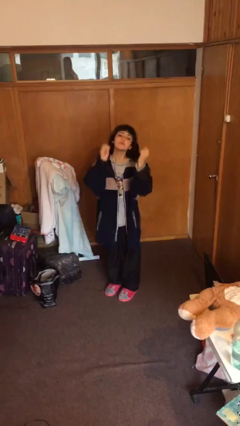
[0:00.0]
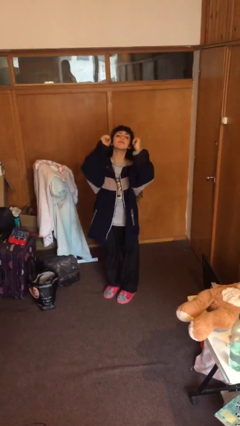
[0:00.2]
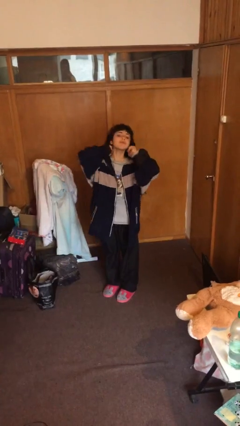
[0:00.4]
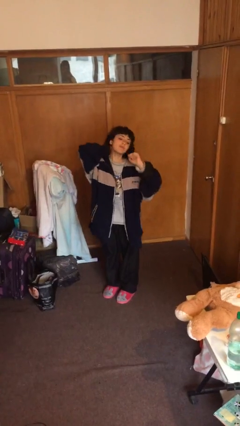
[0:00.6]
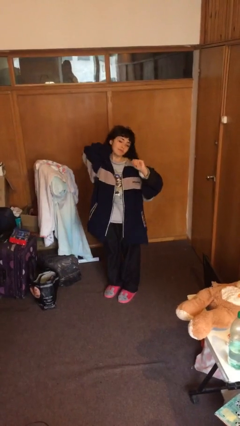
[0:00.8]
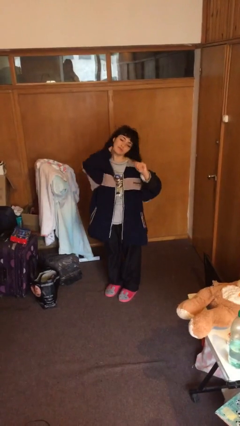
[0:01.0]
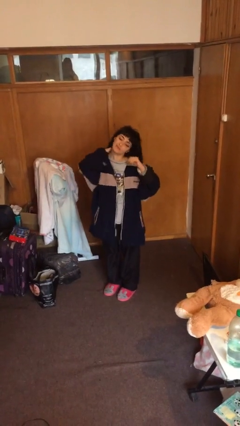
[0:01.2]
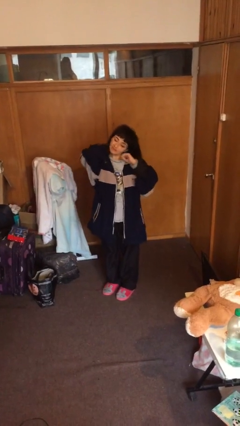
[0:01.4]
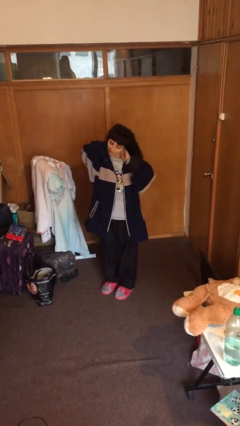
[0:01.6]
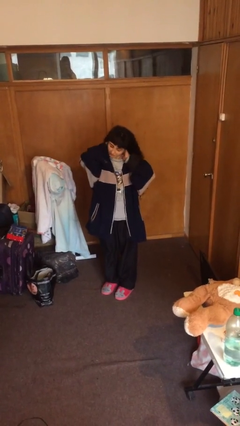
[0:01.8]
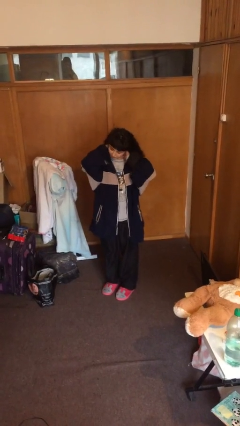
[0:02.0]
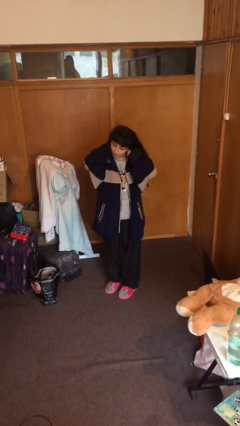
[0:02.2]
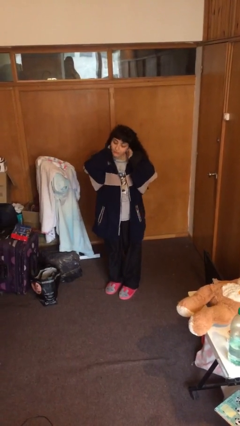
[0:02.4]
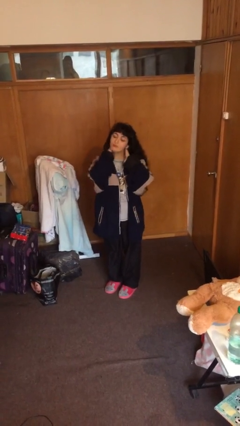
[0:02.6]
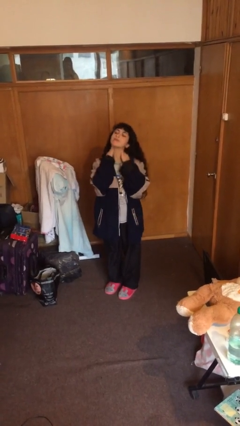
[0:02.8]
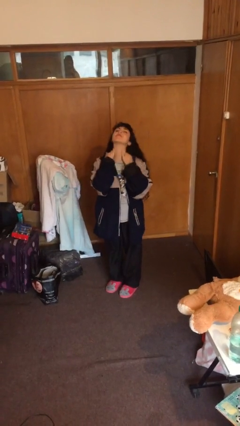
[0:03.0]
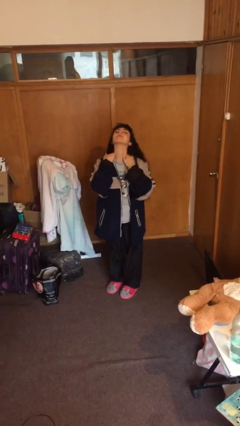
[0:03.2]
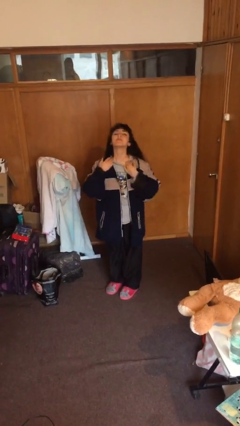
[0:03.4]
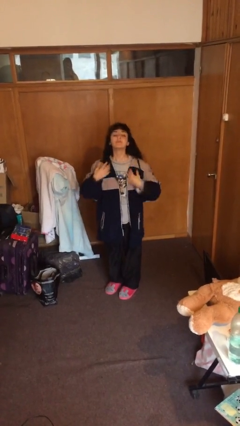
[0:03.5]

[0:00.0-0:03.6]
person rubs neck

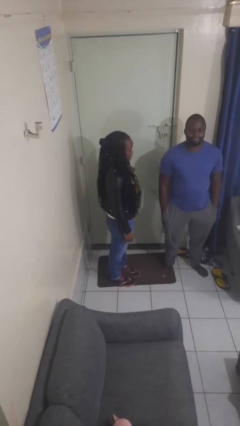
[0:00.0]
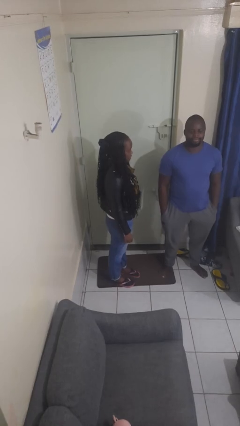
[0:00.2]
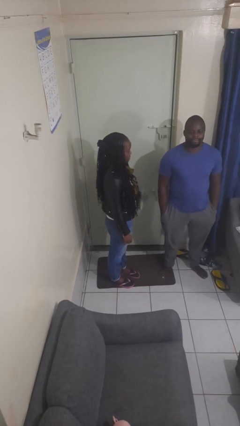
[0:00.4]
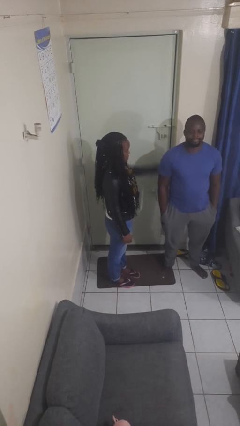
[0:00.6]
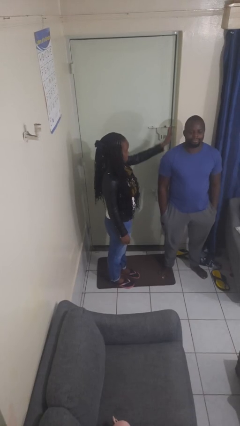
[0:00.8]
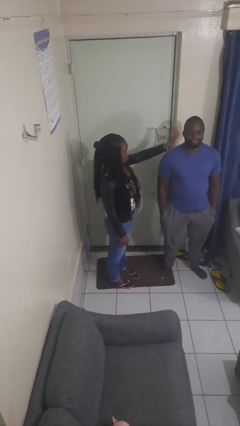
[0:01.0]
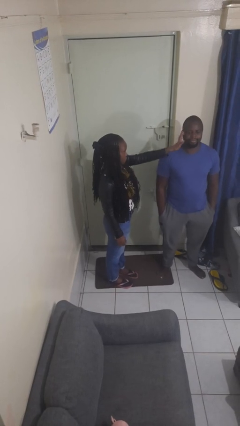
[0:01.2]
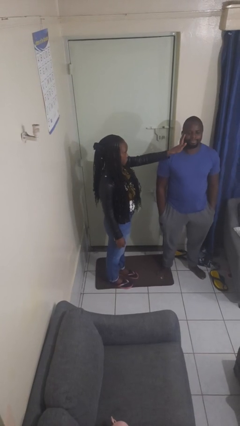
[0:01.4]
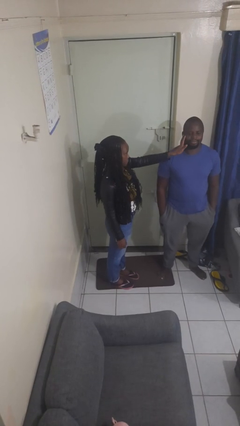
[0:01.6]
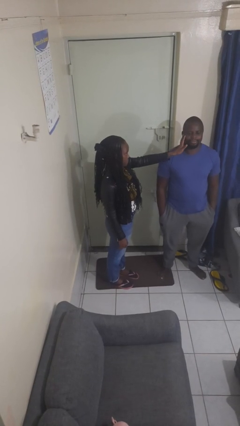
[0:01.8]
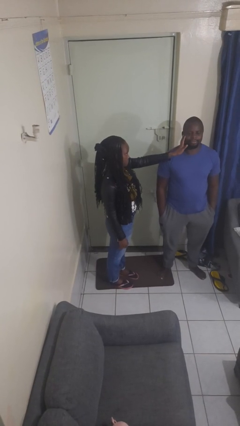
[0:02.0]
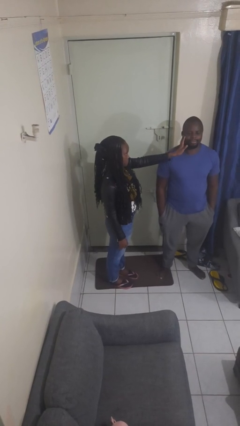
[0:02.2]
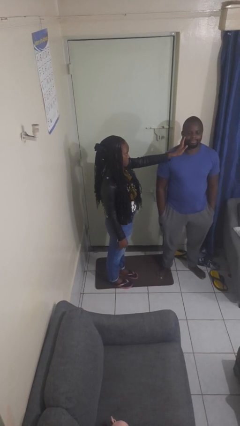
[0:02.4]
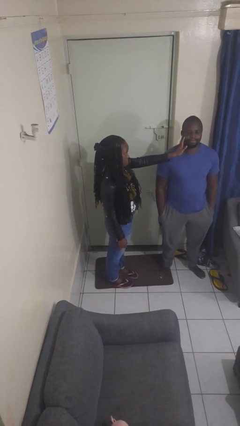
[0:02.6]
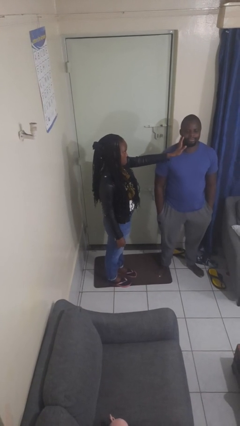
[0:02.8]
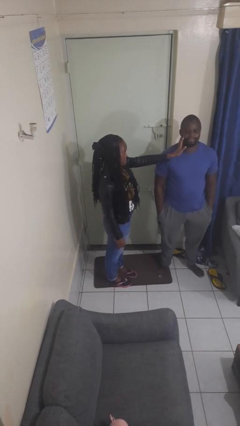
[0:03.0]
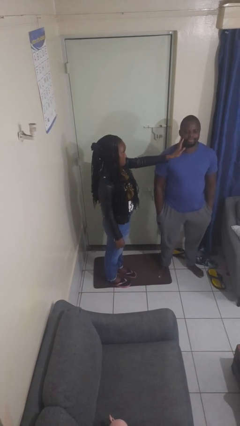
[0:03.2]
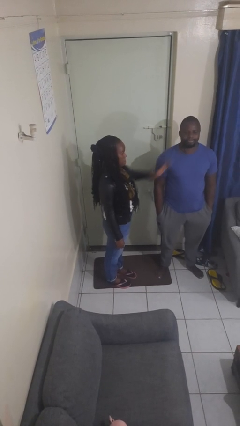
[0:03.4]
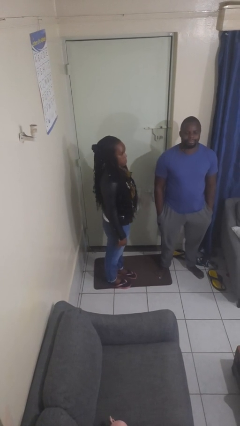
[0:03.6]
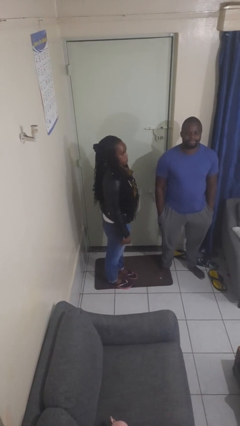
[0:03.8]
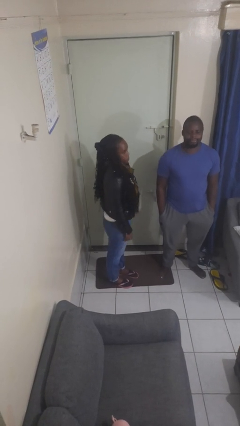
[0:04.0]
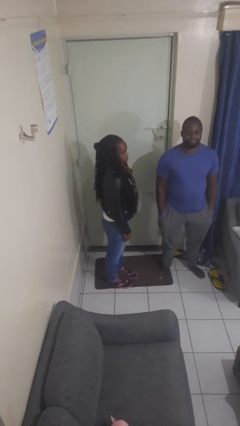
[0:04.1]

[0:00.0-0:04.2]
person touches face of person

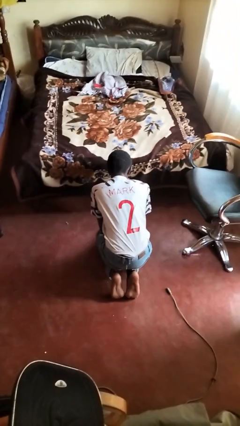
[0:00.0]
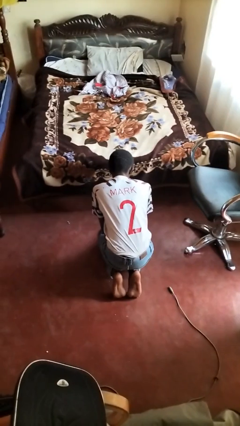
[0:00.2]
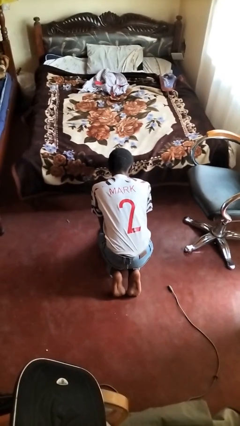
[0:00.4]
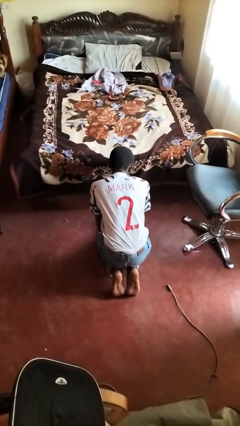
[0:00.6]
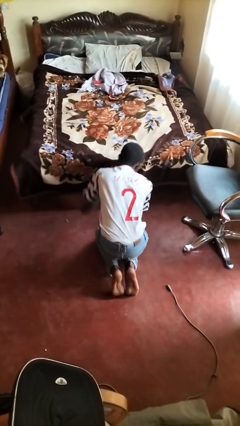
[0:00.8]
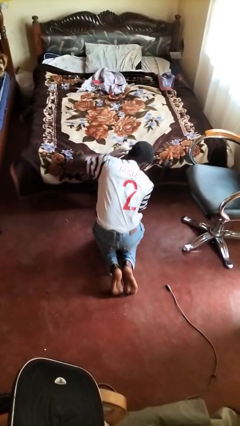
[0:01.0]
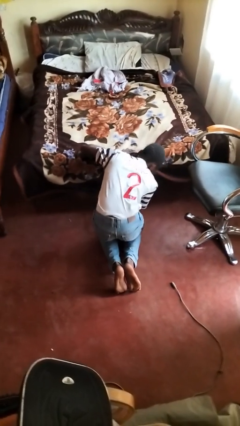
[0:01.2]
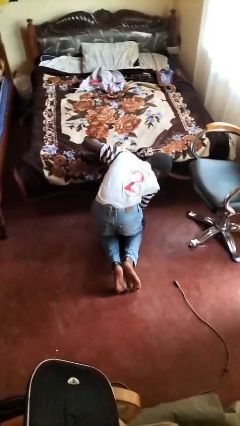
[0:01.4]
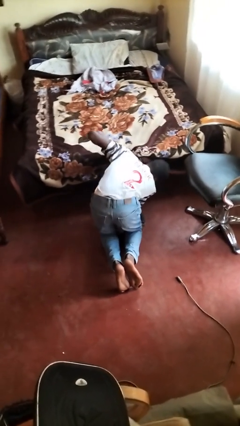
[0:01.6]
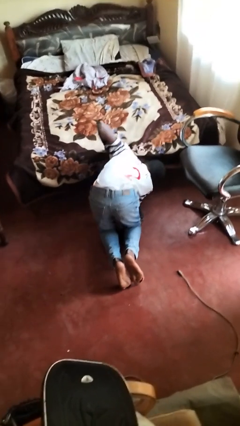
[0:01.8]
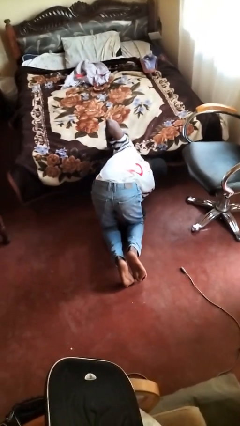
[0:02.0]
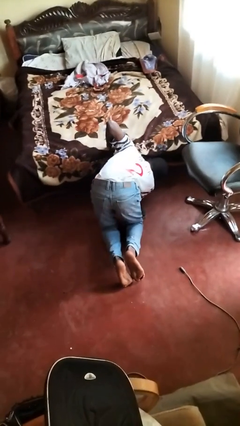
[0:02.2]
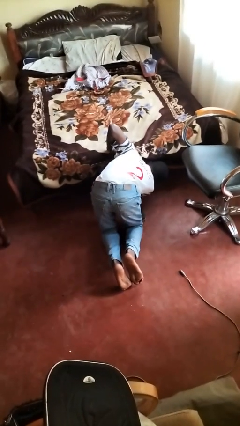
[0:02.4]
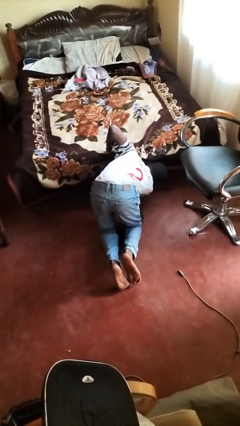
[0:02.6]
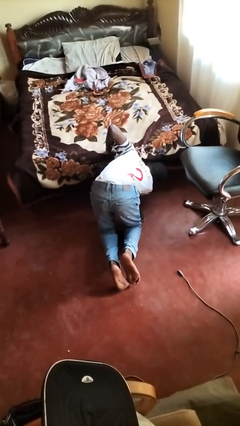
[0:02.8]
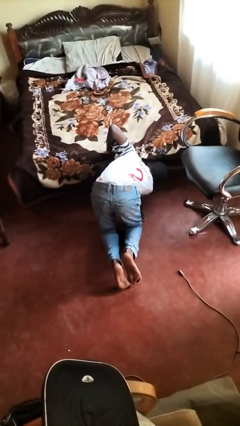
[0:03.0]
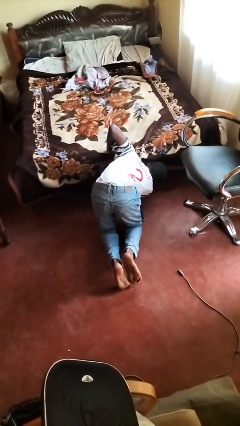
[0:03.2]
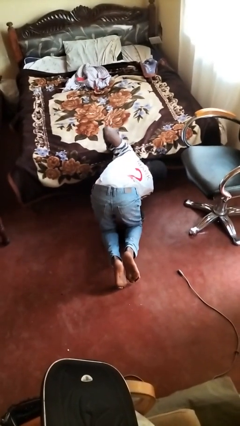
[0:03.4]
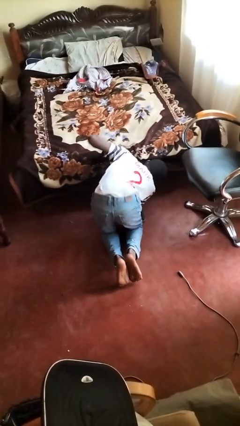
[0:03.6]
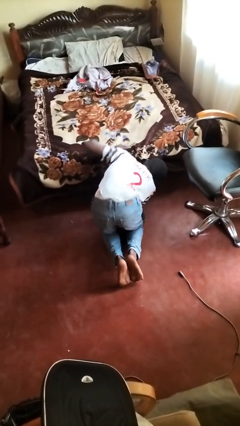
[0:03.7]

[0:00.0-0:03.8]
person searches under bed

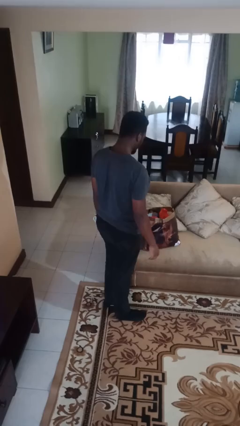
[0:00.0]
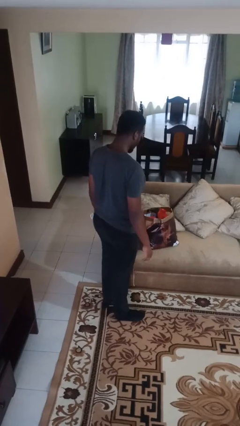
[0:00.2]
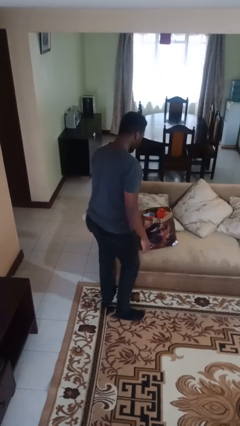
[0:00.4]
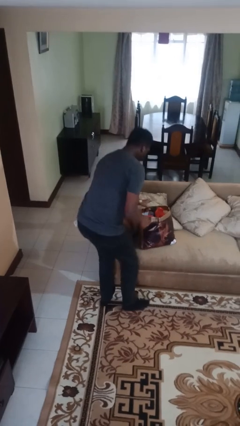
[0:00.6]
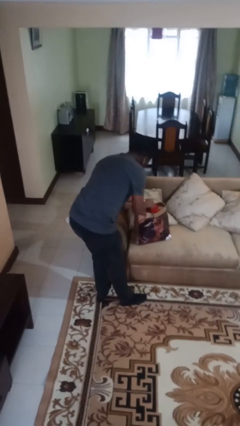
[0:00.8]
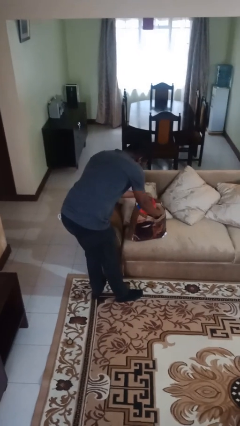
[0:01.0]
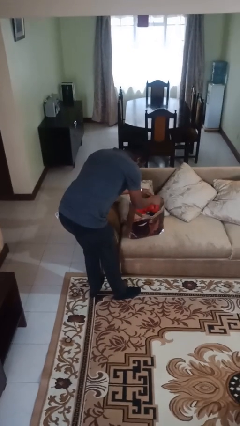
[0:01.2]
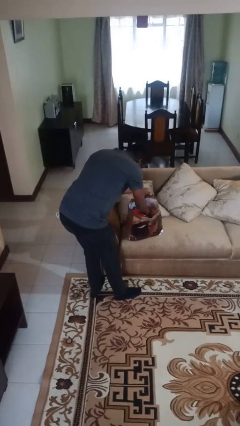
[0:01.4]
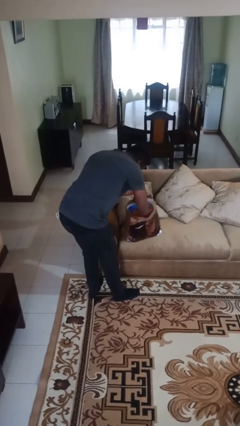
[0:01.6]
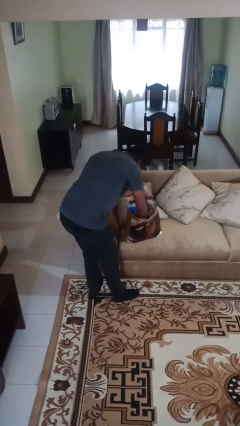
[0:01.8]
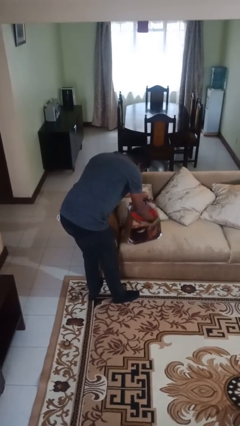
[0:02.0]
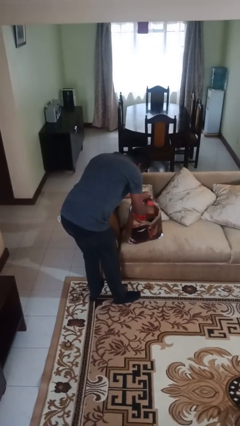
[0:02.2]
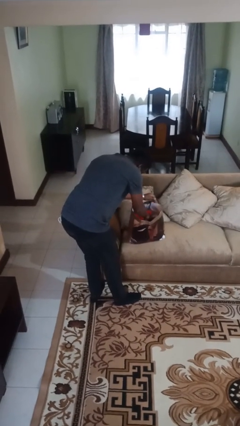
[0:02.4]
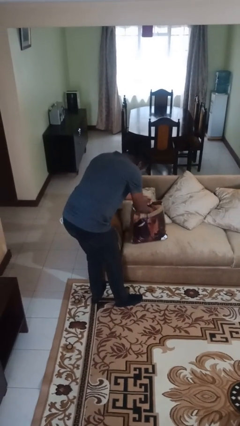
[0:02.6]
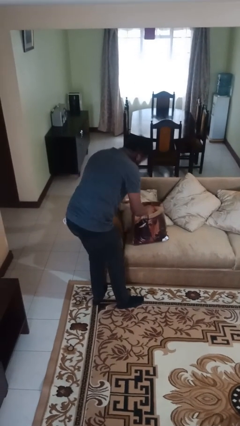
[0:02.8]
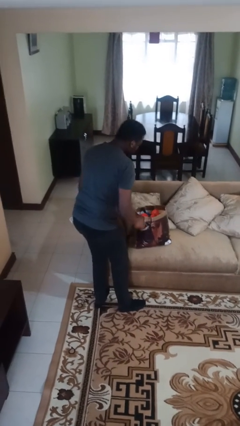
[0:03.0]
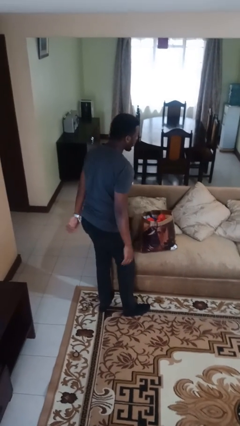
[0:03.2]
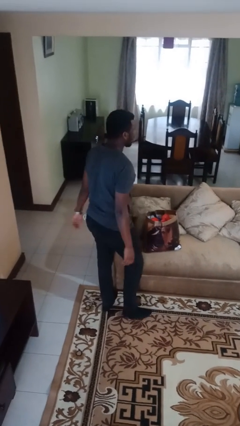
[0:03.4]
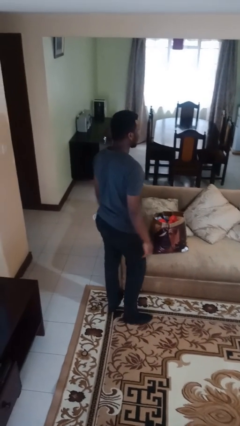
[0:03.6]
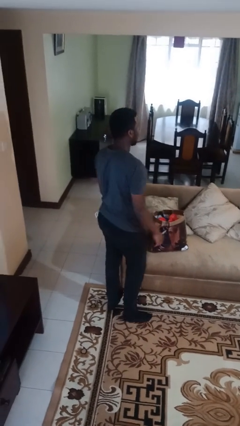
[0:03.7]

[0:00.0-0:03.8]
person searches in bag

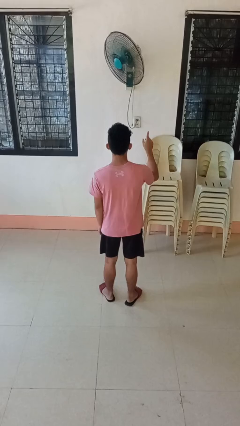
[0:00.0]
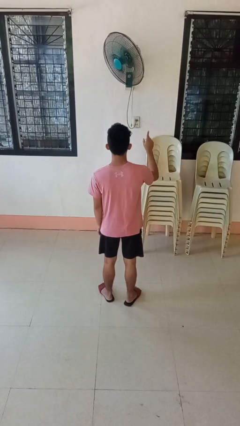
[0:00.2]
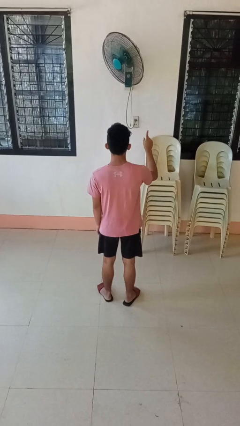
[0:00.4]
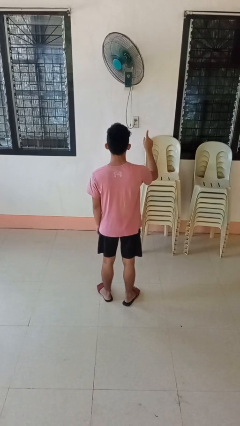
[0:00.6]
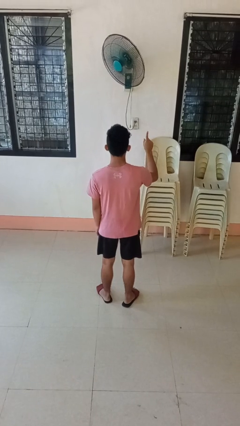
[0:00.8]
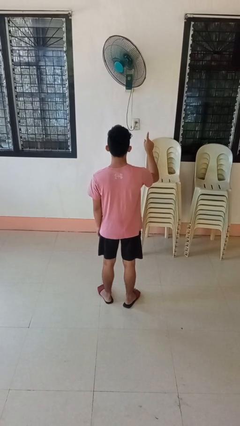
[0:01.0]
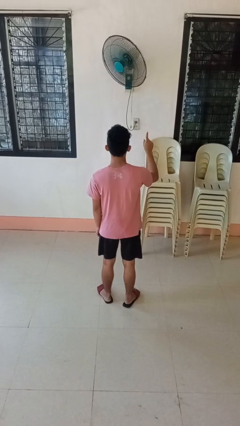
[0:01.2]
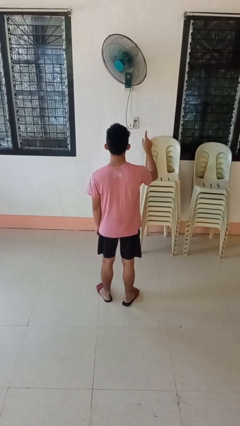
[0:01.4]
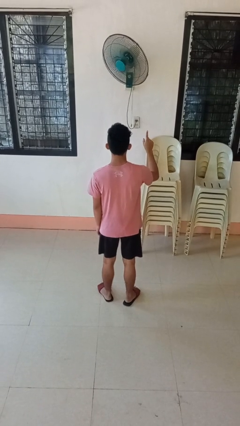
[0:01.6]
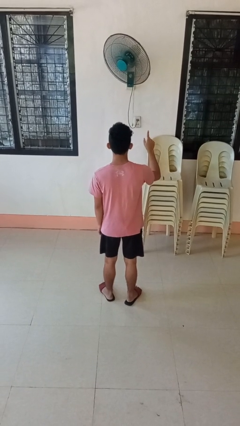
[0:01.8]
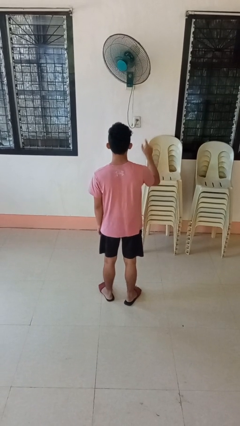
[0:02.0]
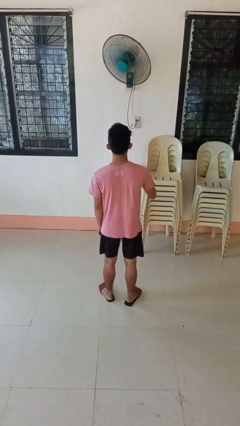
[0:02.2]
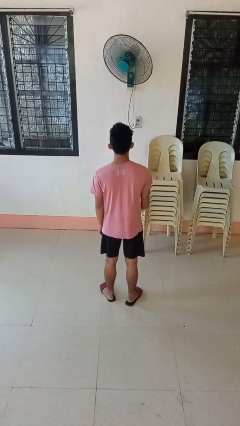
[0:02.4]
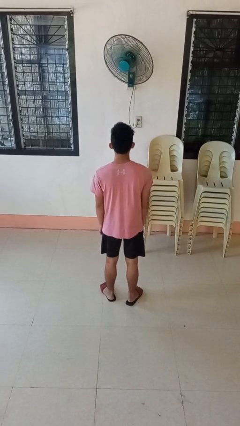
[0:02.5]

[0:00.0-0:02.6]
person gestures number one
